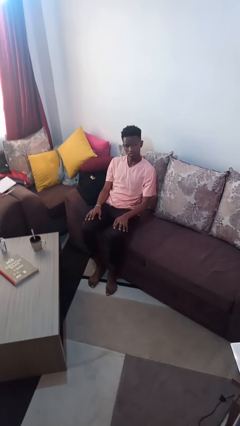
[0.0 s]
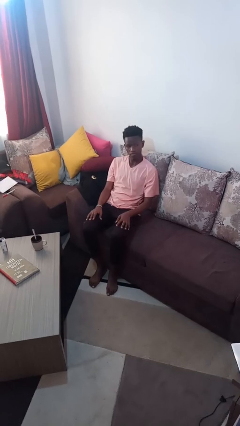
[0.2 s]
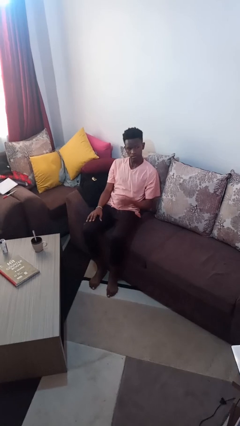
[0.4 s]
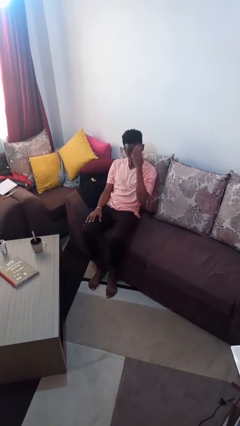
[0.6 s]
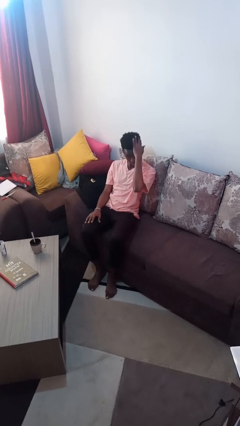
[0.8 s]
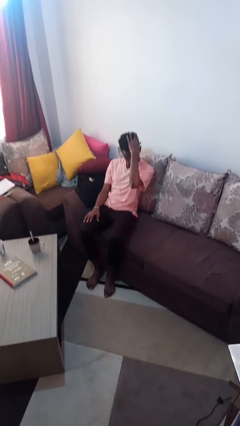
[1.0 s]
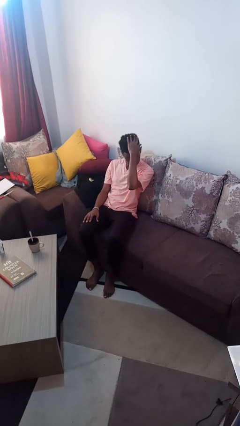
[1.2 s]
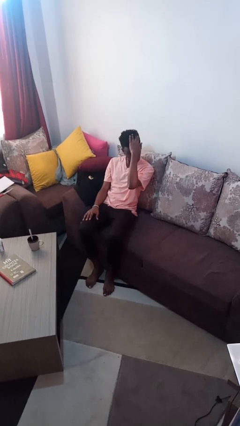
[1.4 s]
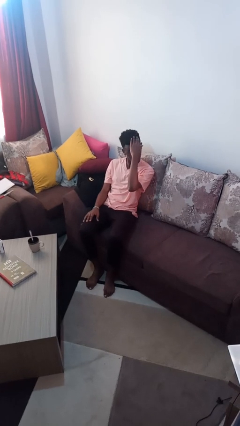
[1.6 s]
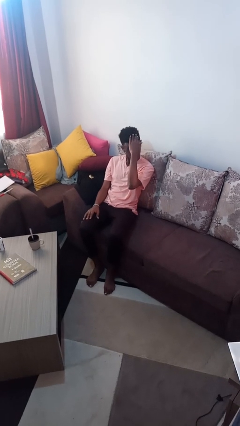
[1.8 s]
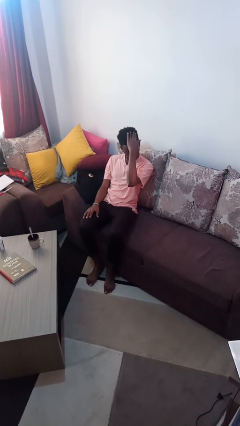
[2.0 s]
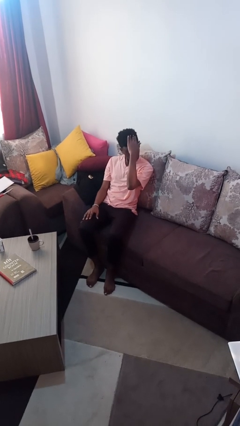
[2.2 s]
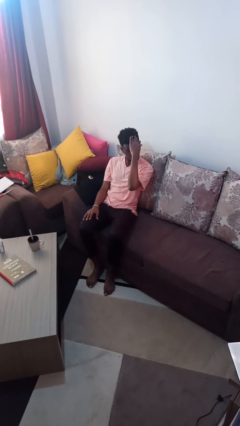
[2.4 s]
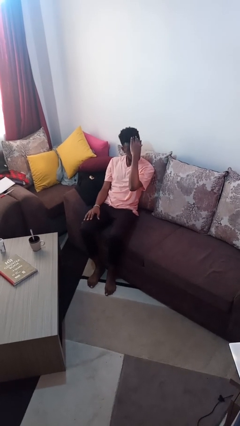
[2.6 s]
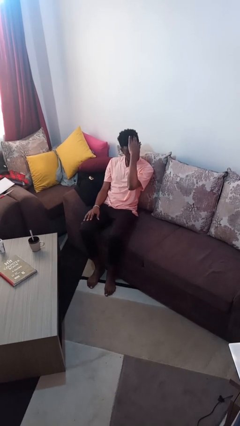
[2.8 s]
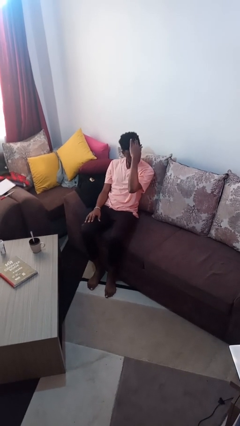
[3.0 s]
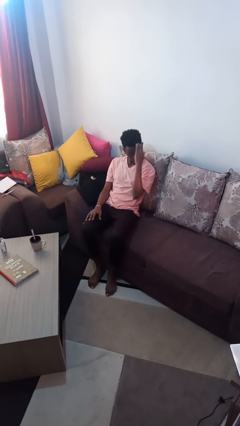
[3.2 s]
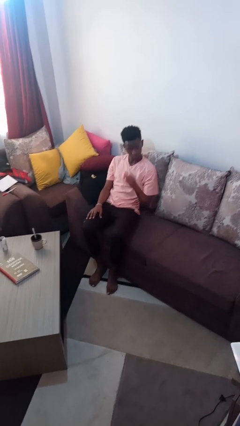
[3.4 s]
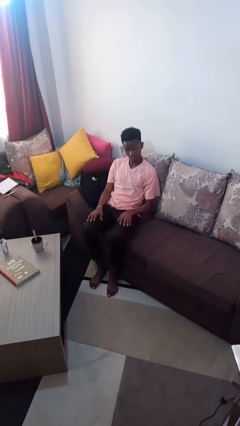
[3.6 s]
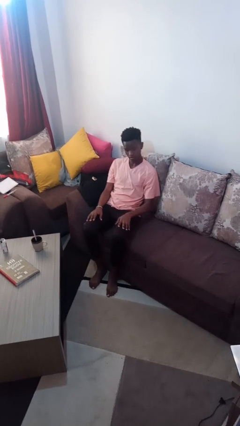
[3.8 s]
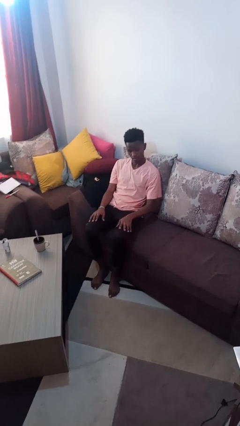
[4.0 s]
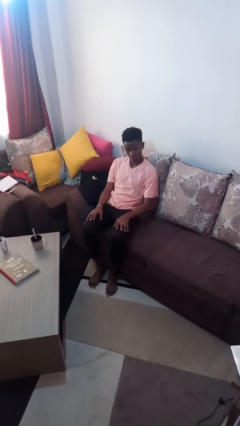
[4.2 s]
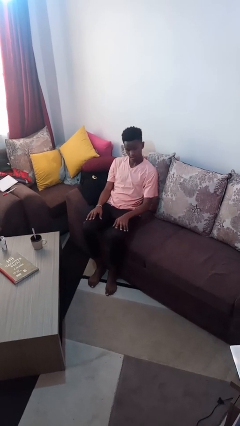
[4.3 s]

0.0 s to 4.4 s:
person strokes hair

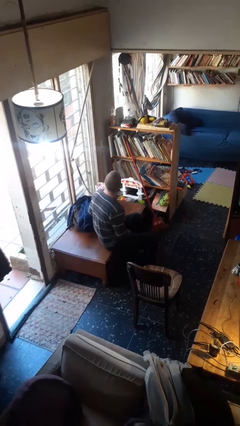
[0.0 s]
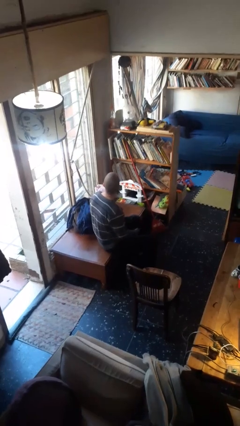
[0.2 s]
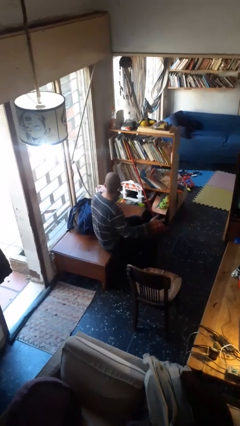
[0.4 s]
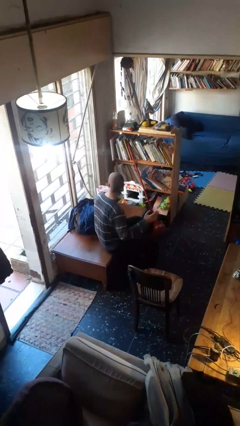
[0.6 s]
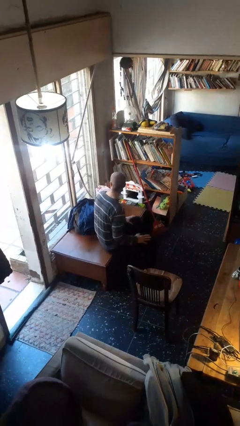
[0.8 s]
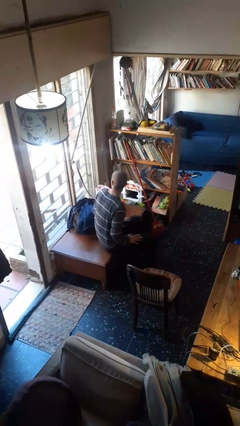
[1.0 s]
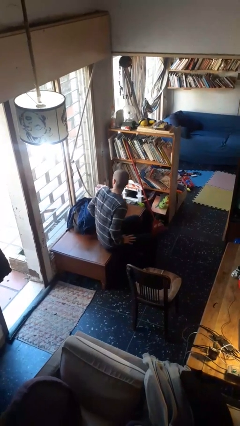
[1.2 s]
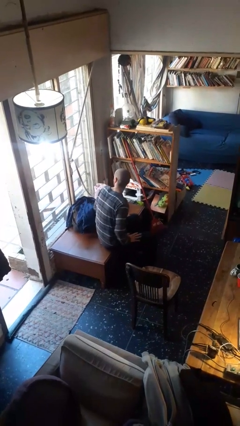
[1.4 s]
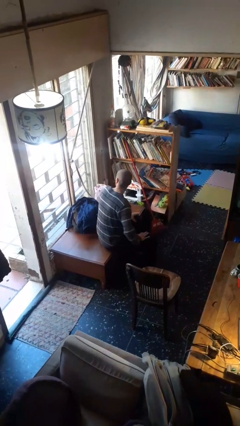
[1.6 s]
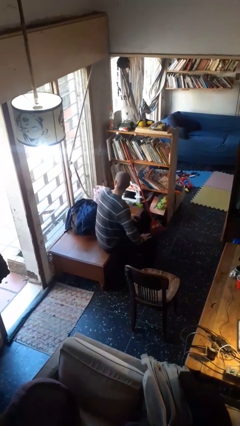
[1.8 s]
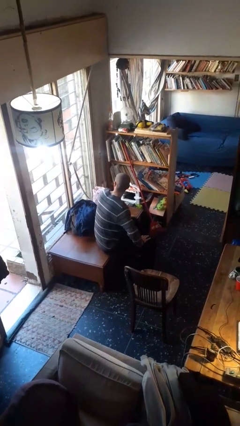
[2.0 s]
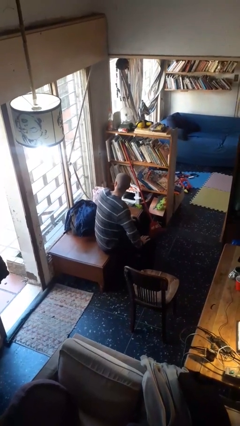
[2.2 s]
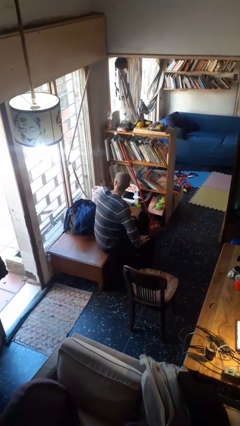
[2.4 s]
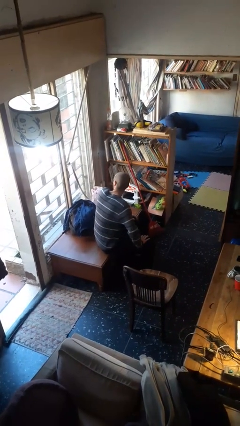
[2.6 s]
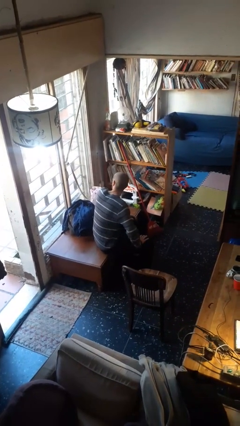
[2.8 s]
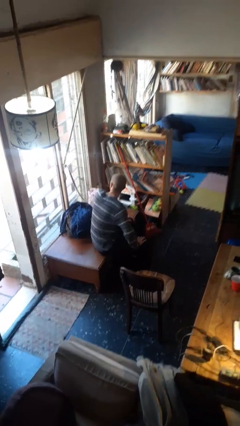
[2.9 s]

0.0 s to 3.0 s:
person slaps hands on thighs

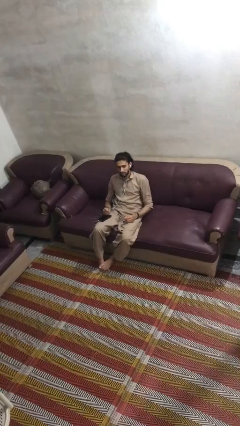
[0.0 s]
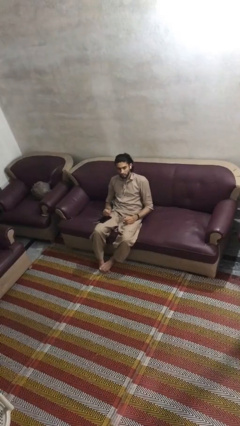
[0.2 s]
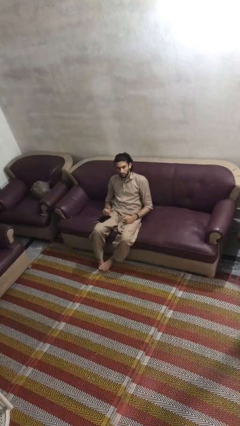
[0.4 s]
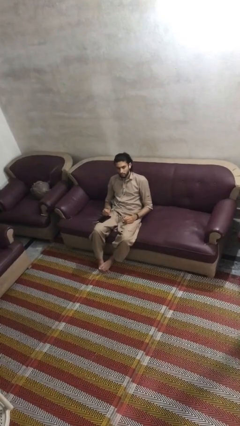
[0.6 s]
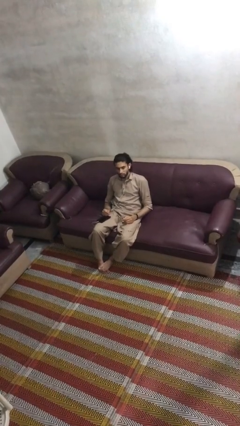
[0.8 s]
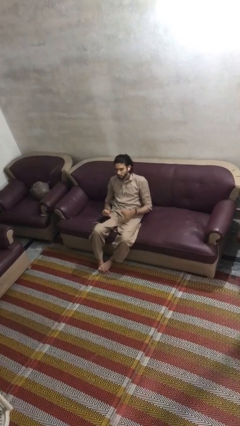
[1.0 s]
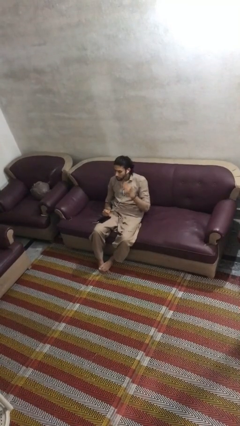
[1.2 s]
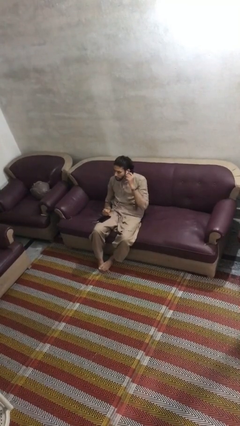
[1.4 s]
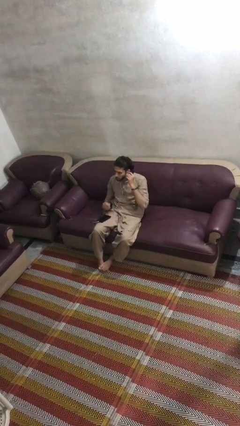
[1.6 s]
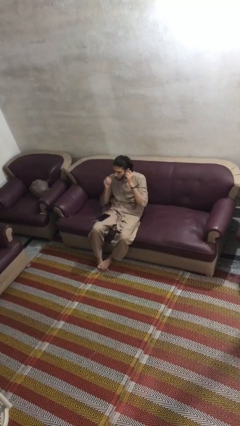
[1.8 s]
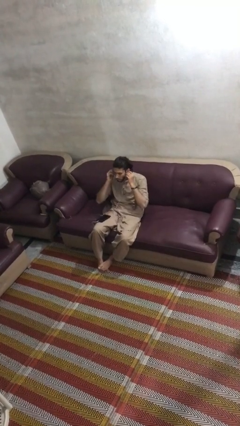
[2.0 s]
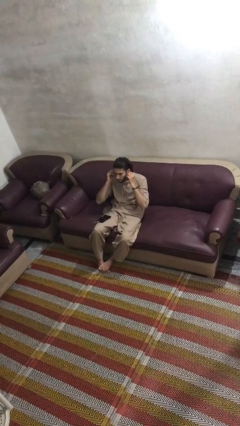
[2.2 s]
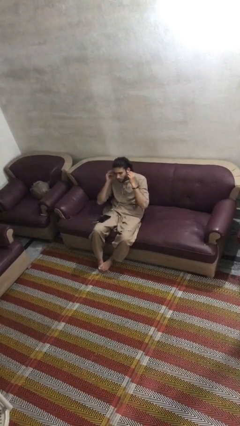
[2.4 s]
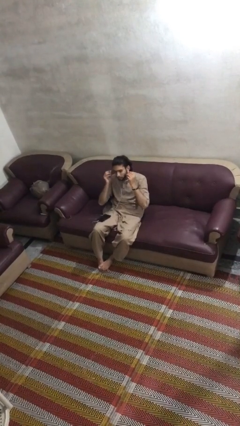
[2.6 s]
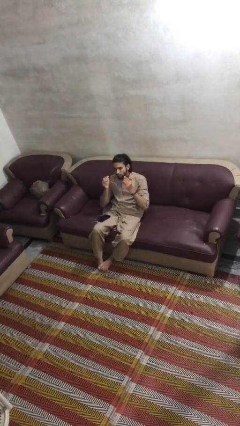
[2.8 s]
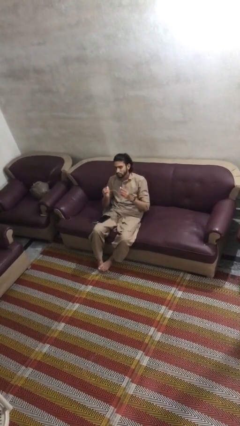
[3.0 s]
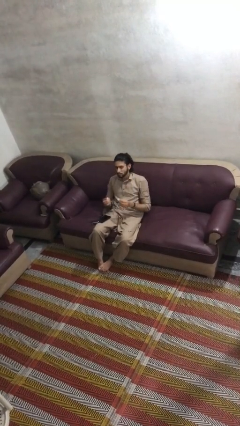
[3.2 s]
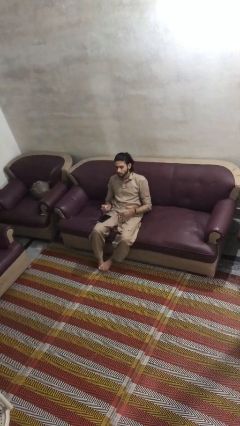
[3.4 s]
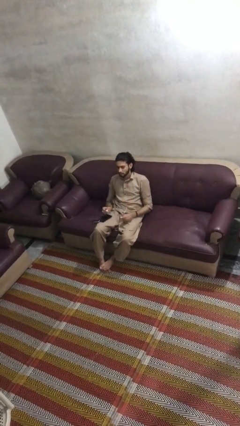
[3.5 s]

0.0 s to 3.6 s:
person takes off headphones

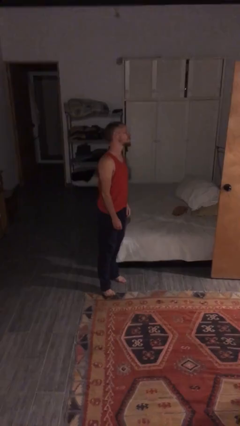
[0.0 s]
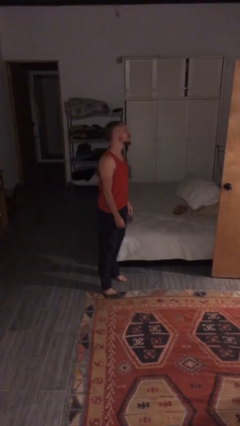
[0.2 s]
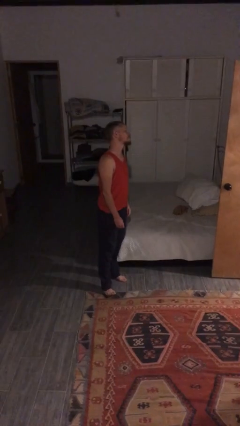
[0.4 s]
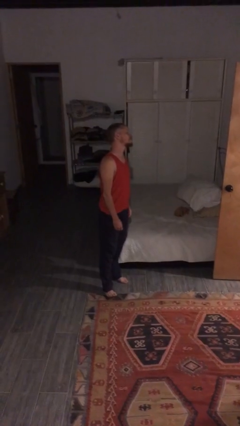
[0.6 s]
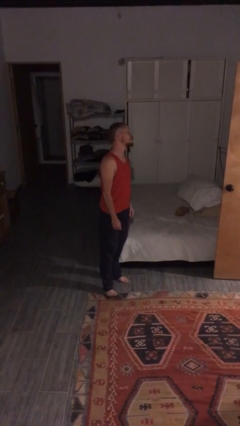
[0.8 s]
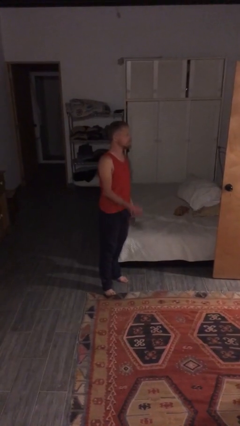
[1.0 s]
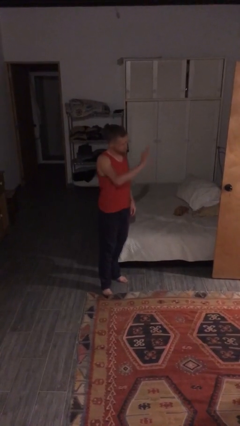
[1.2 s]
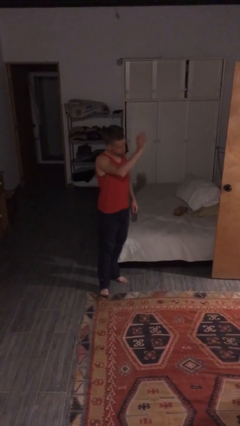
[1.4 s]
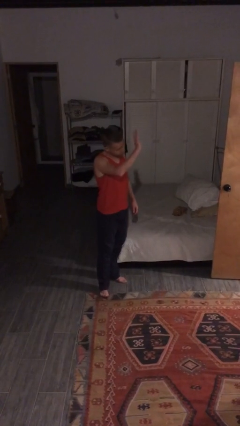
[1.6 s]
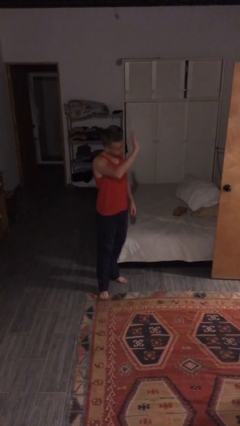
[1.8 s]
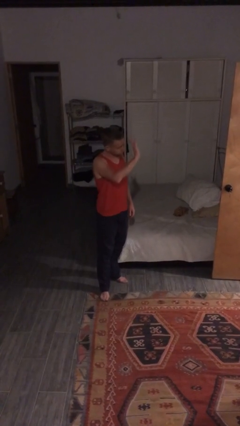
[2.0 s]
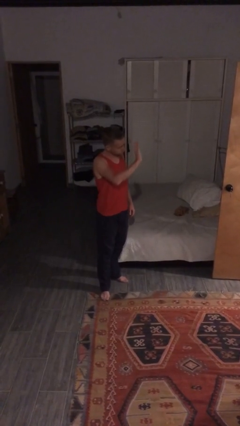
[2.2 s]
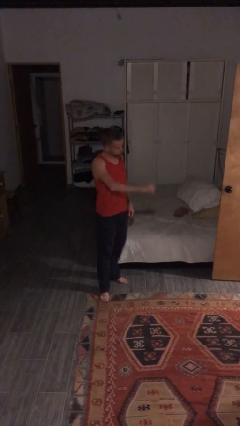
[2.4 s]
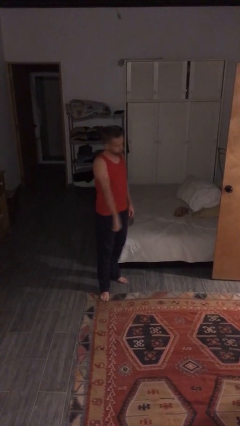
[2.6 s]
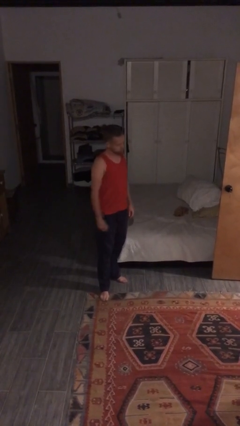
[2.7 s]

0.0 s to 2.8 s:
person waves at person

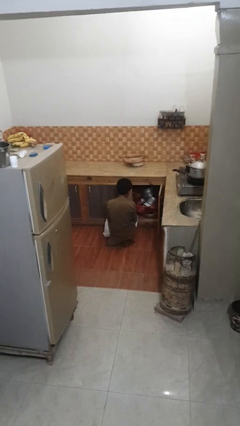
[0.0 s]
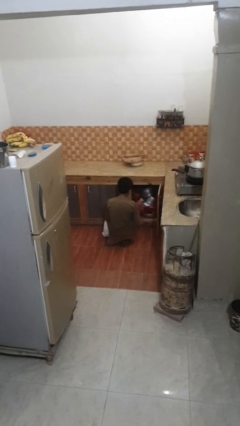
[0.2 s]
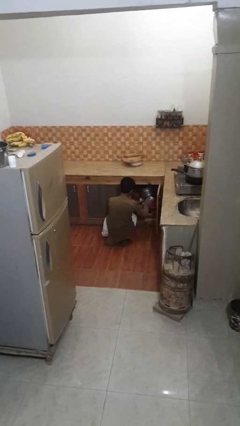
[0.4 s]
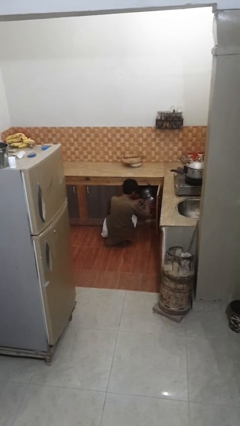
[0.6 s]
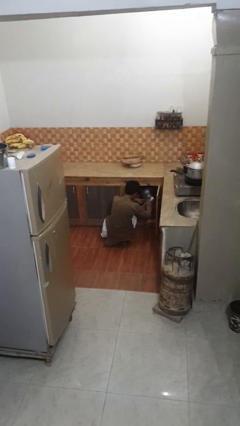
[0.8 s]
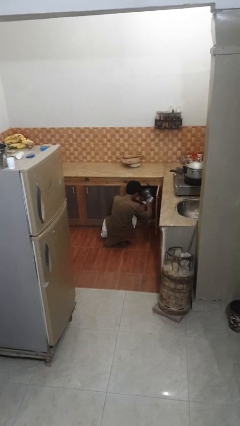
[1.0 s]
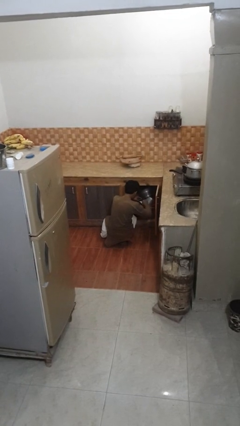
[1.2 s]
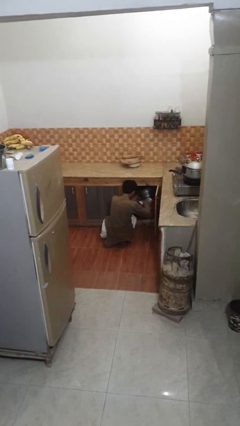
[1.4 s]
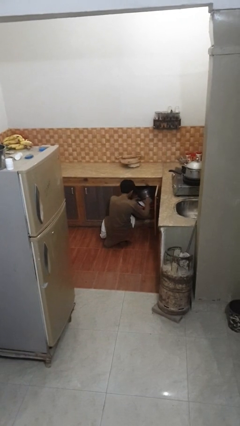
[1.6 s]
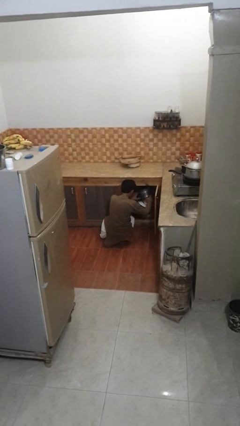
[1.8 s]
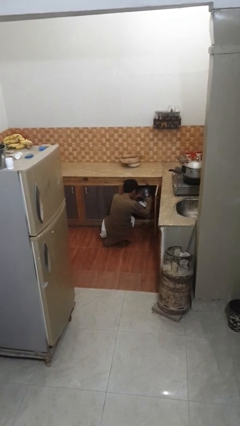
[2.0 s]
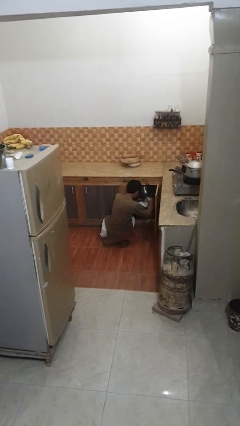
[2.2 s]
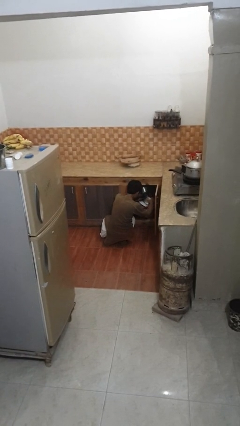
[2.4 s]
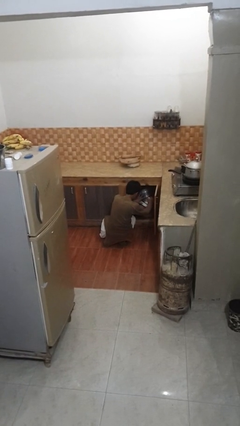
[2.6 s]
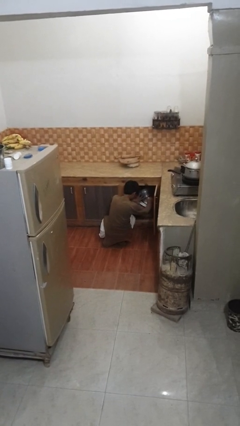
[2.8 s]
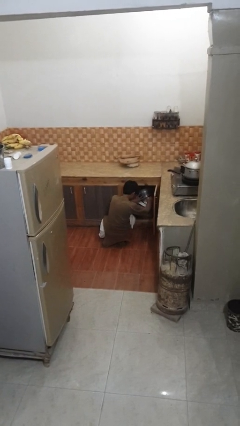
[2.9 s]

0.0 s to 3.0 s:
person searches in kitchen drawer

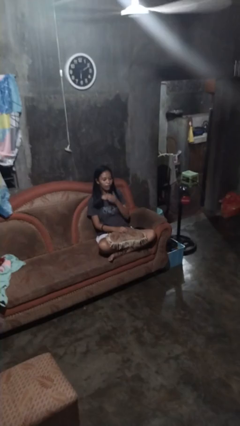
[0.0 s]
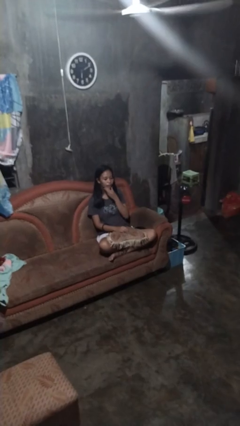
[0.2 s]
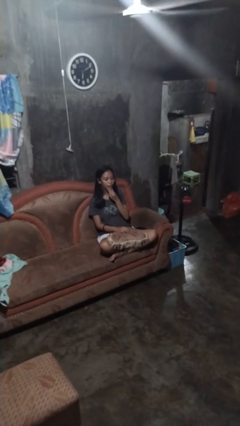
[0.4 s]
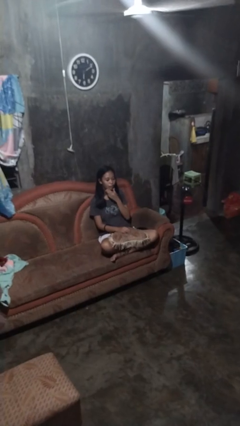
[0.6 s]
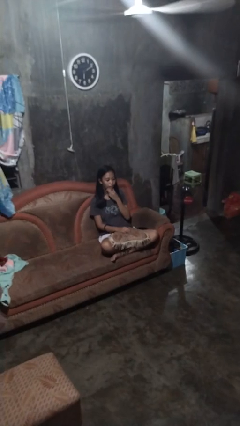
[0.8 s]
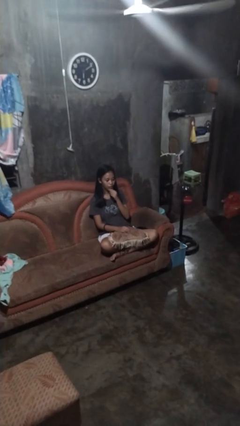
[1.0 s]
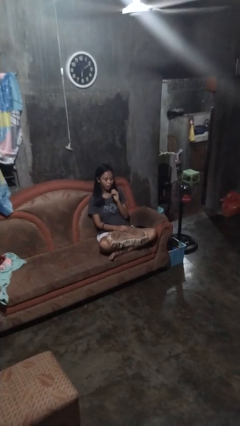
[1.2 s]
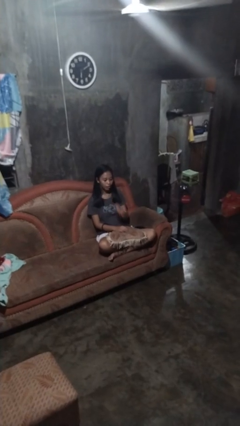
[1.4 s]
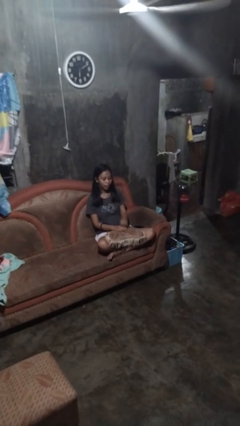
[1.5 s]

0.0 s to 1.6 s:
person strokes chin
